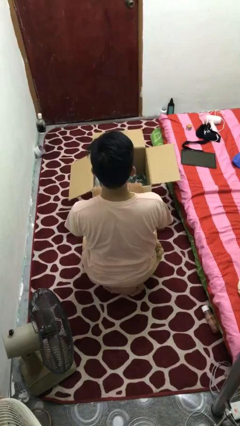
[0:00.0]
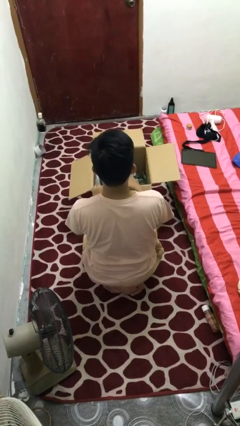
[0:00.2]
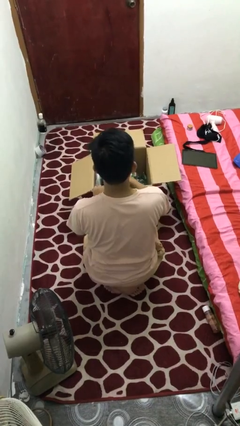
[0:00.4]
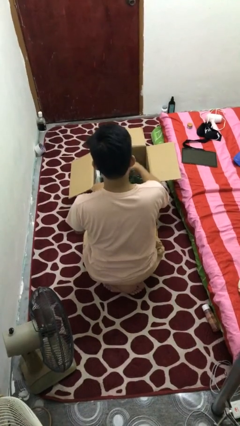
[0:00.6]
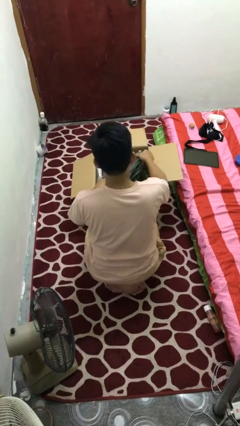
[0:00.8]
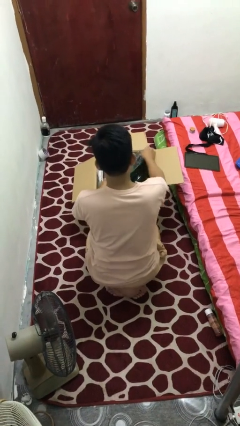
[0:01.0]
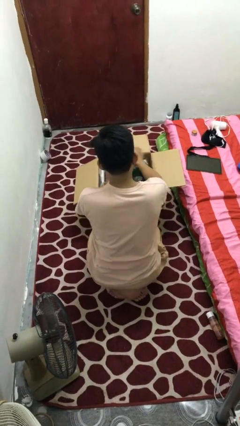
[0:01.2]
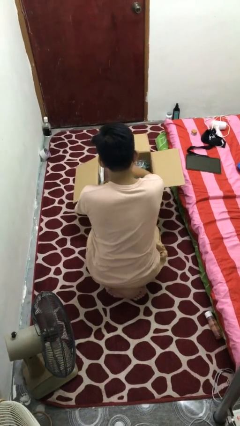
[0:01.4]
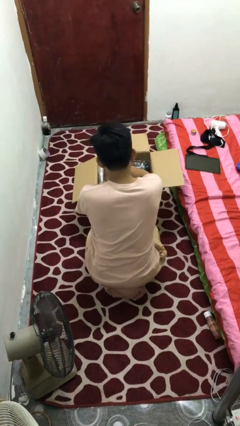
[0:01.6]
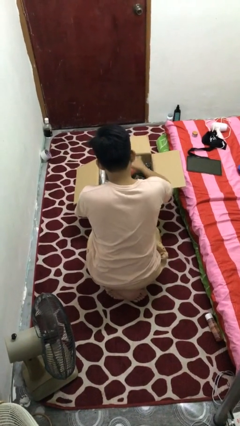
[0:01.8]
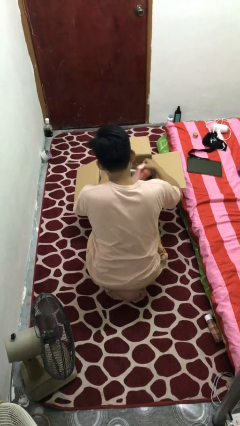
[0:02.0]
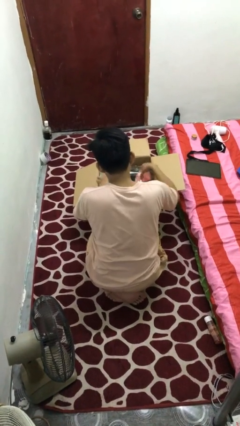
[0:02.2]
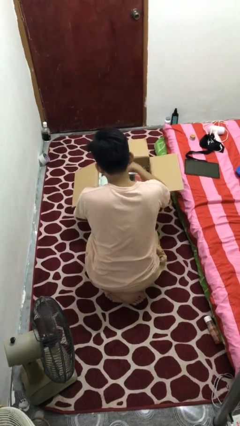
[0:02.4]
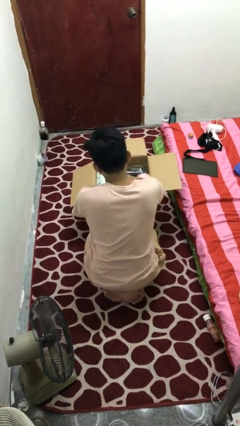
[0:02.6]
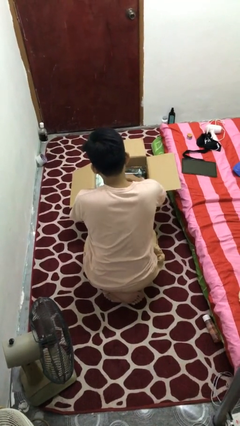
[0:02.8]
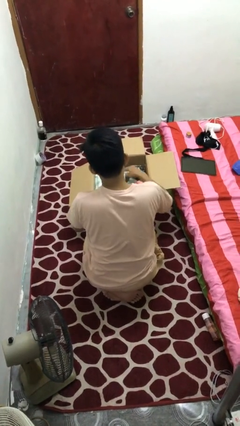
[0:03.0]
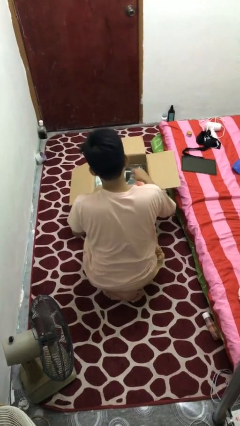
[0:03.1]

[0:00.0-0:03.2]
person searches in box

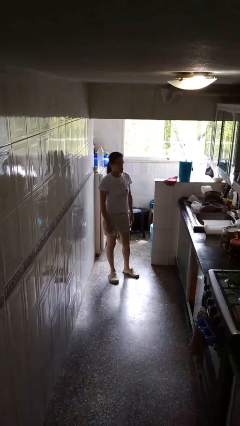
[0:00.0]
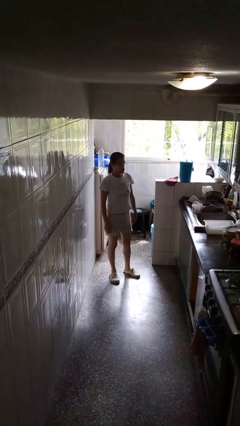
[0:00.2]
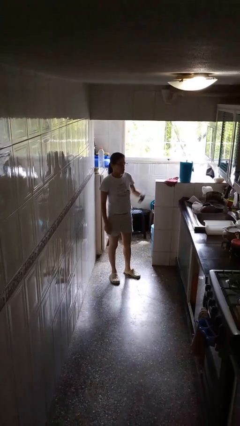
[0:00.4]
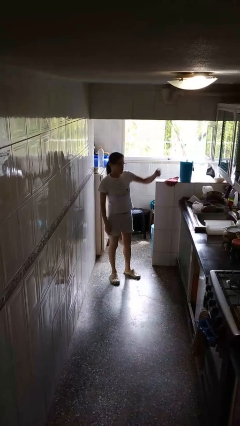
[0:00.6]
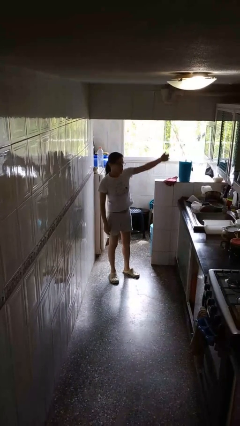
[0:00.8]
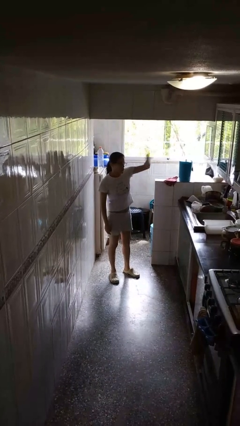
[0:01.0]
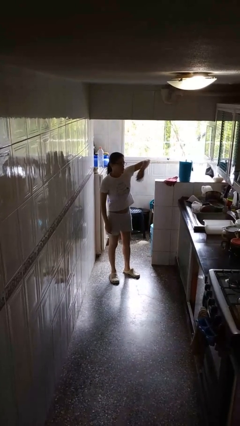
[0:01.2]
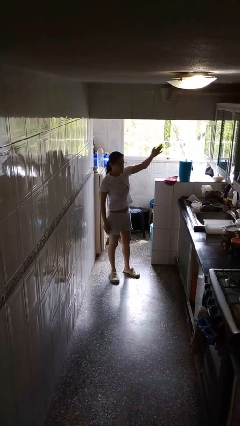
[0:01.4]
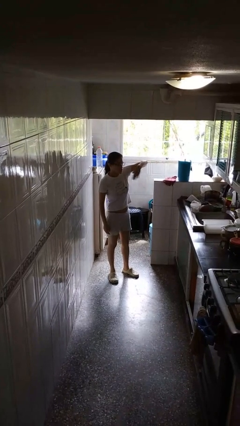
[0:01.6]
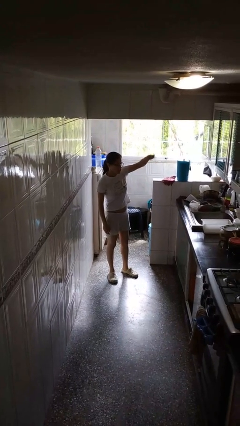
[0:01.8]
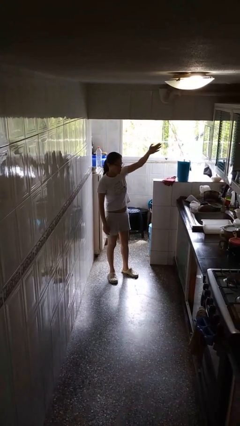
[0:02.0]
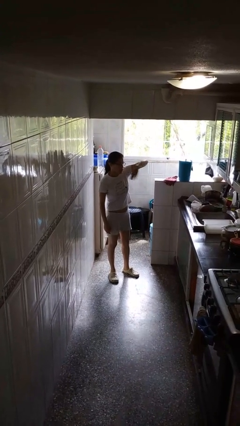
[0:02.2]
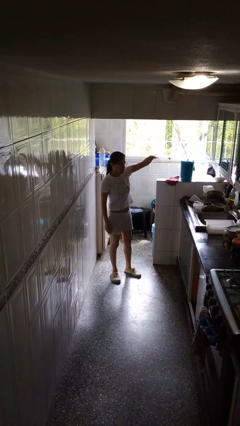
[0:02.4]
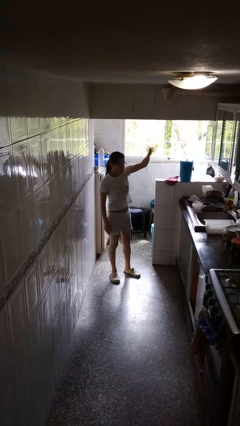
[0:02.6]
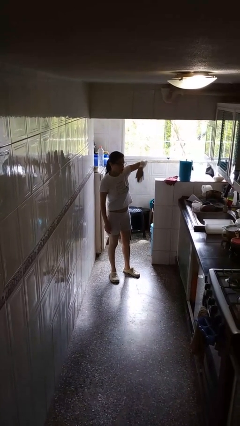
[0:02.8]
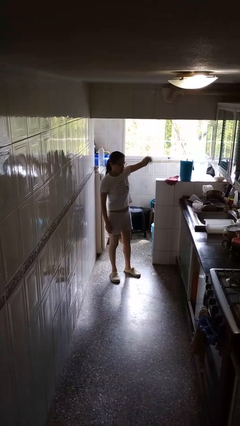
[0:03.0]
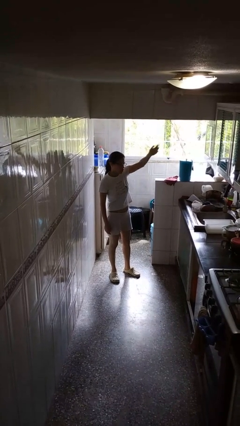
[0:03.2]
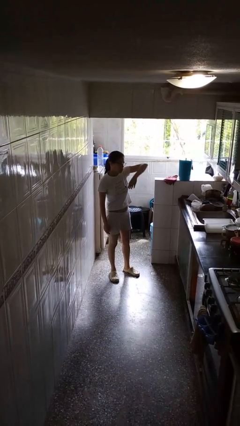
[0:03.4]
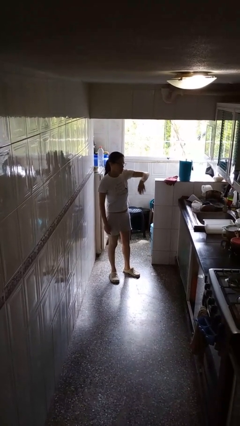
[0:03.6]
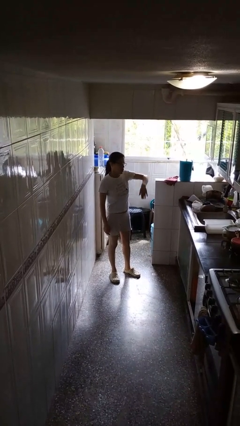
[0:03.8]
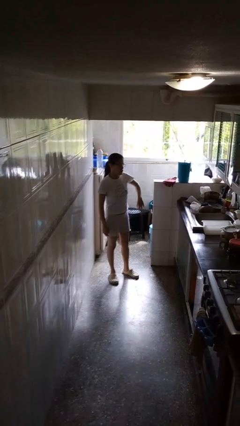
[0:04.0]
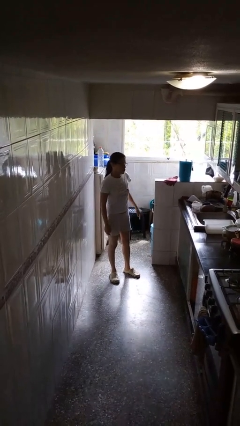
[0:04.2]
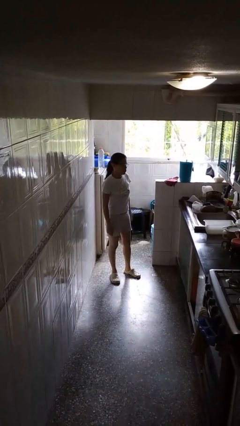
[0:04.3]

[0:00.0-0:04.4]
person gestures come here

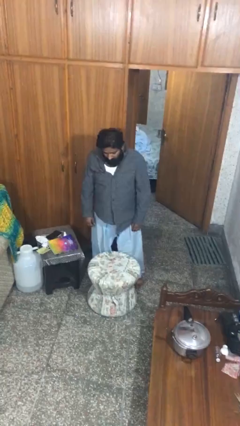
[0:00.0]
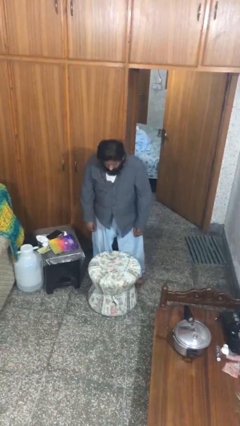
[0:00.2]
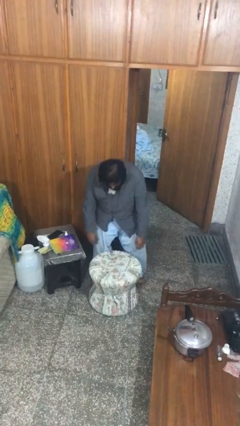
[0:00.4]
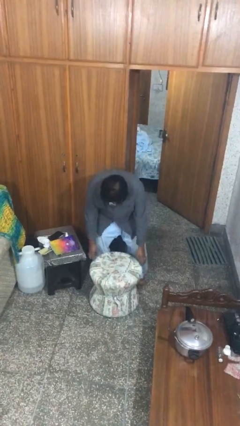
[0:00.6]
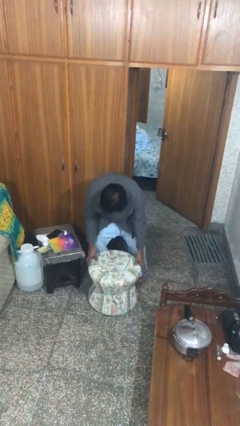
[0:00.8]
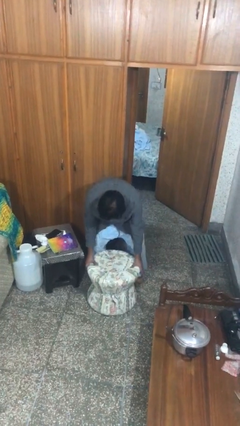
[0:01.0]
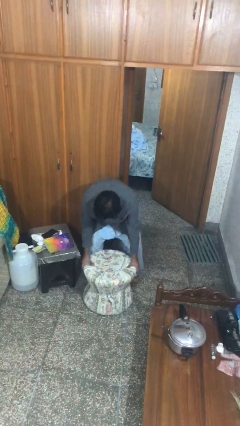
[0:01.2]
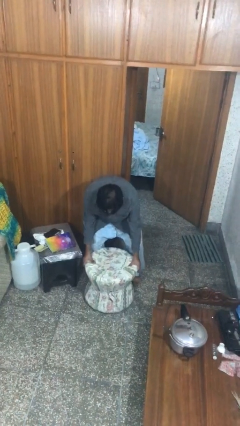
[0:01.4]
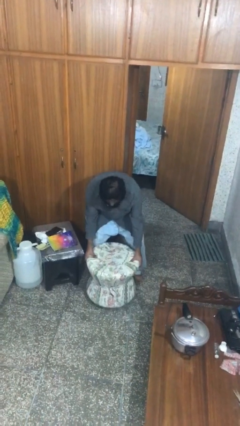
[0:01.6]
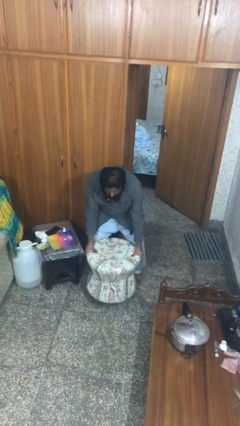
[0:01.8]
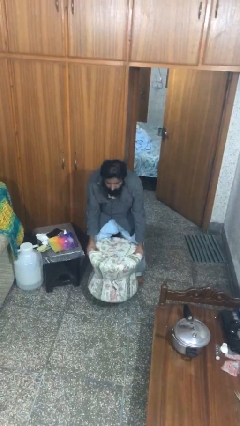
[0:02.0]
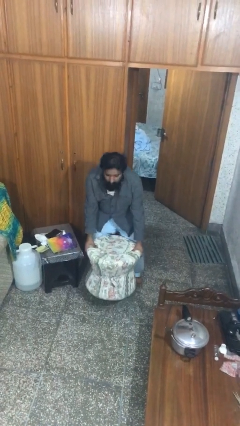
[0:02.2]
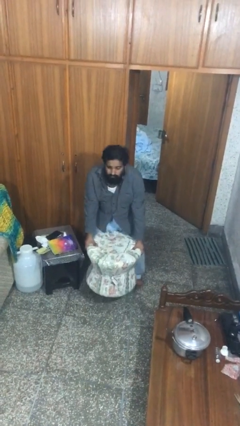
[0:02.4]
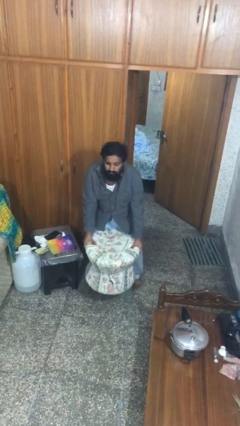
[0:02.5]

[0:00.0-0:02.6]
person picks up object from floor

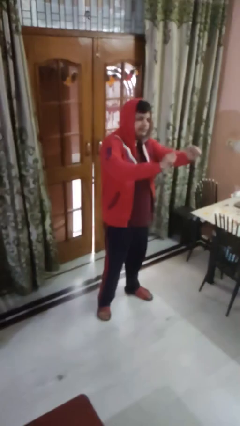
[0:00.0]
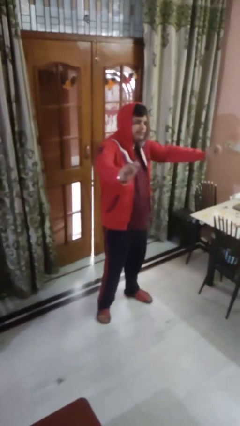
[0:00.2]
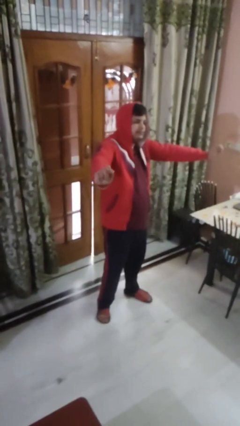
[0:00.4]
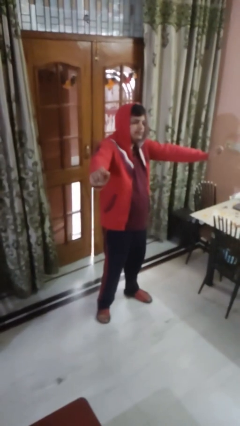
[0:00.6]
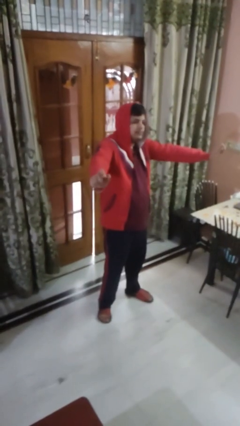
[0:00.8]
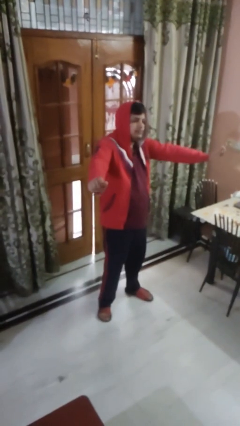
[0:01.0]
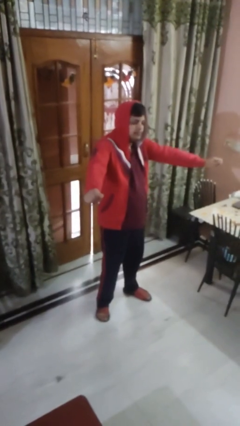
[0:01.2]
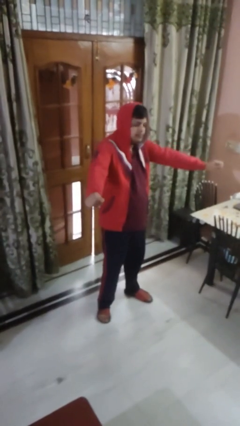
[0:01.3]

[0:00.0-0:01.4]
person gestures zoom in

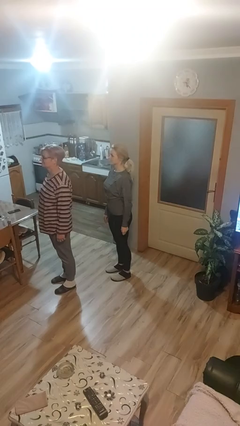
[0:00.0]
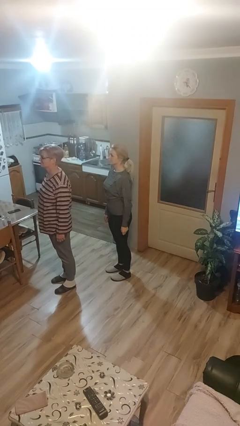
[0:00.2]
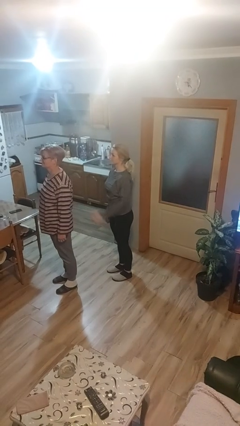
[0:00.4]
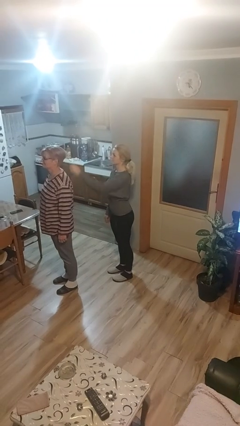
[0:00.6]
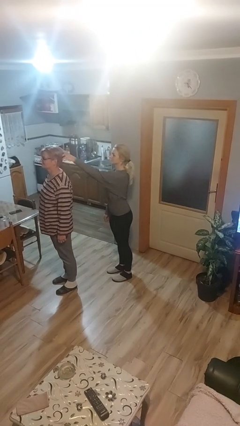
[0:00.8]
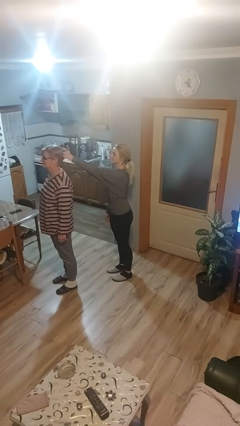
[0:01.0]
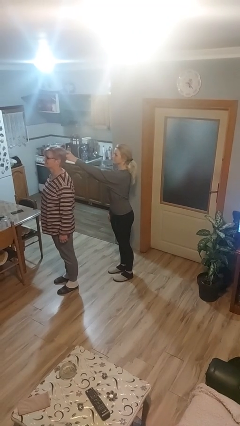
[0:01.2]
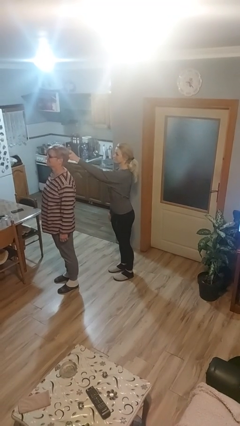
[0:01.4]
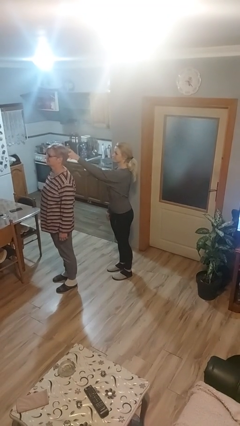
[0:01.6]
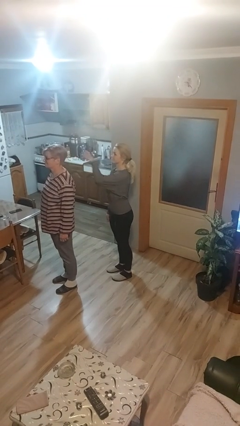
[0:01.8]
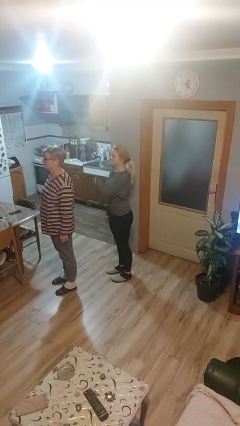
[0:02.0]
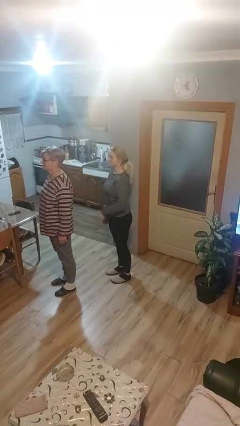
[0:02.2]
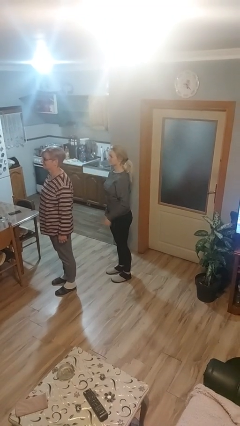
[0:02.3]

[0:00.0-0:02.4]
person grabs person by hair

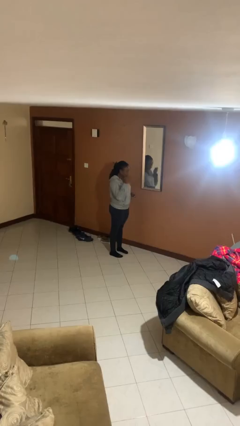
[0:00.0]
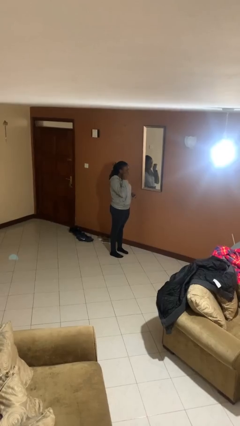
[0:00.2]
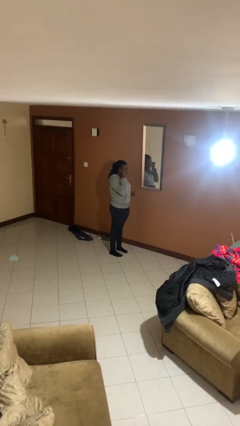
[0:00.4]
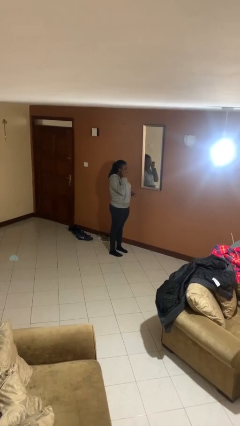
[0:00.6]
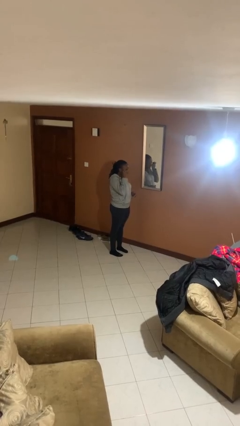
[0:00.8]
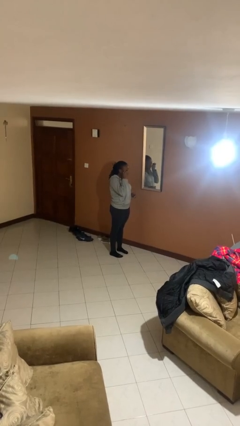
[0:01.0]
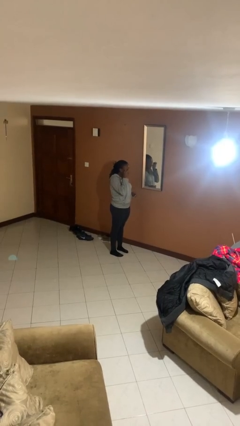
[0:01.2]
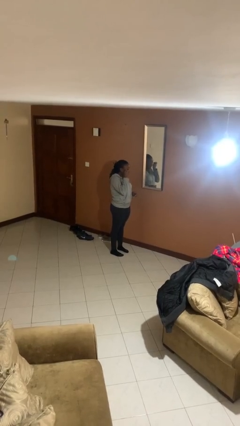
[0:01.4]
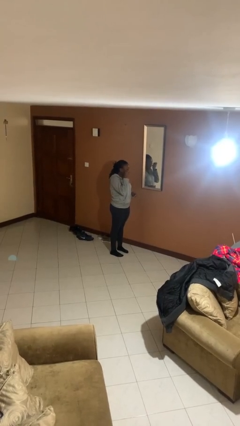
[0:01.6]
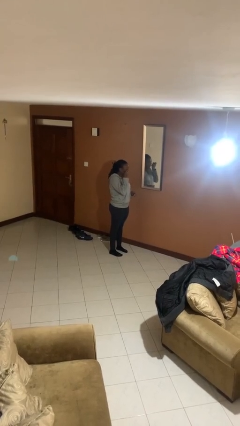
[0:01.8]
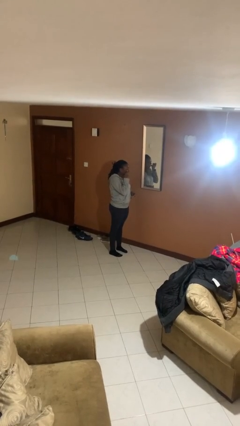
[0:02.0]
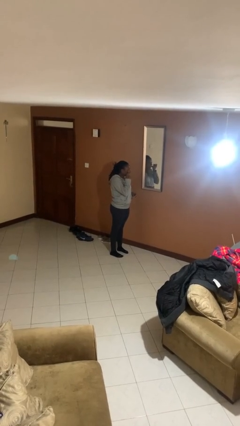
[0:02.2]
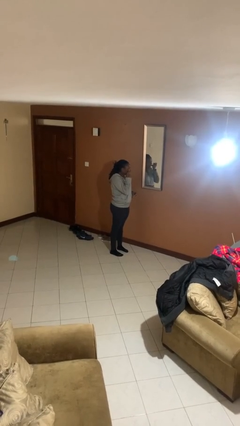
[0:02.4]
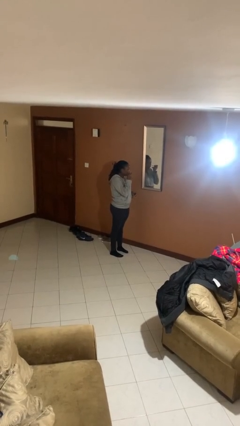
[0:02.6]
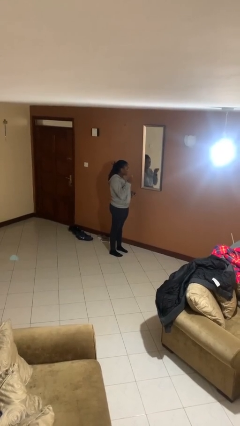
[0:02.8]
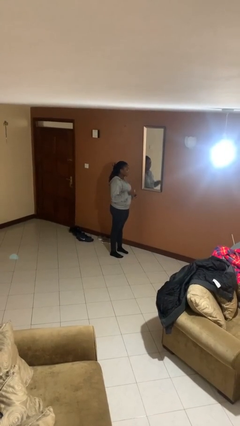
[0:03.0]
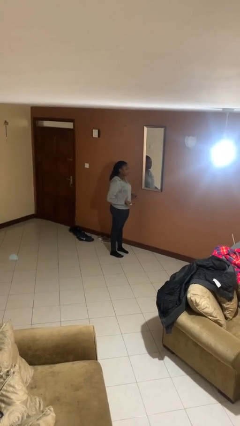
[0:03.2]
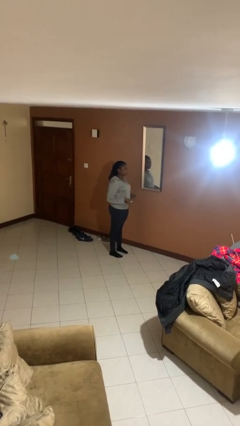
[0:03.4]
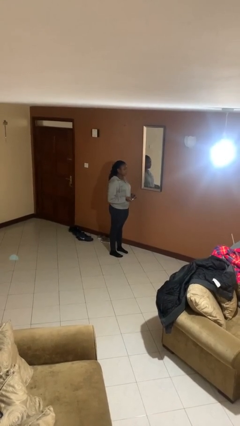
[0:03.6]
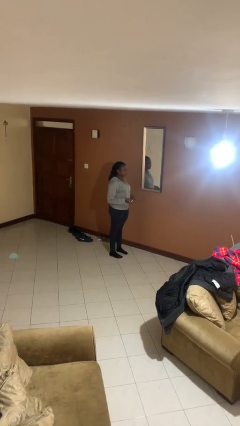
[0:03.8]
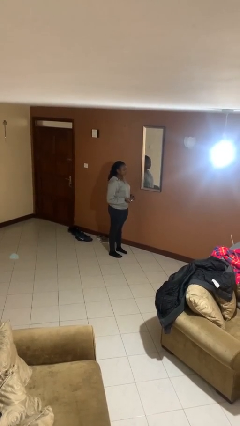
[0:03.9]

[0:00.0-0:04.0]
person applies eye makeup
